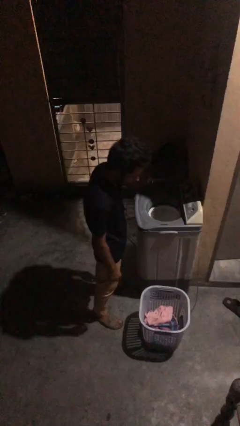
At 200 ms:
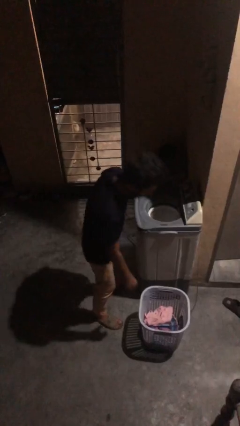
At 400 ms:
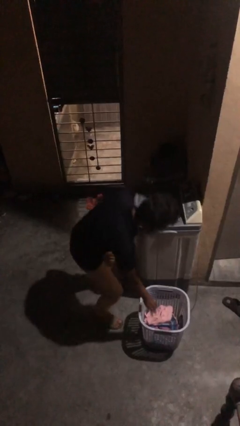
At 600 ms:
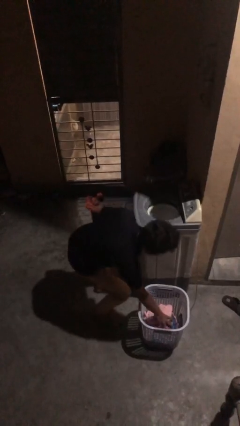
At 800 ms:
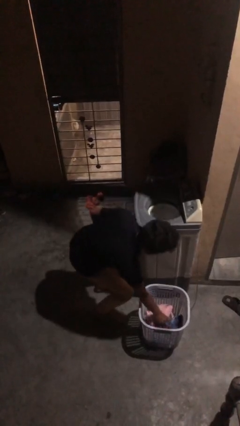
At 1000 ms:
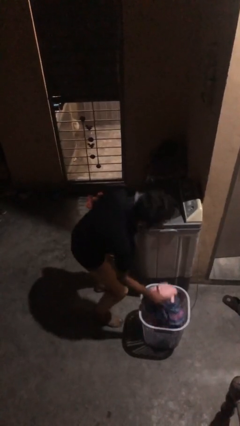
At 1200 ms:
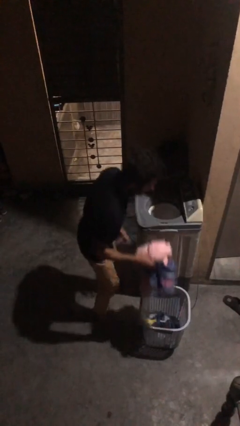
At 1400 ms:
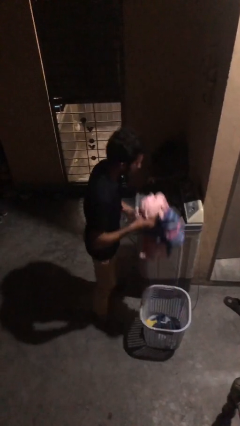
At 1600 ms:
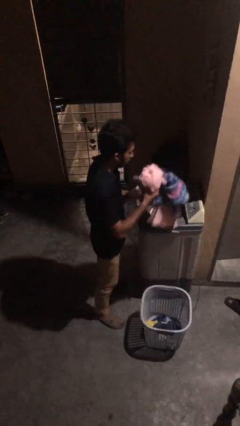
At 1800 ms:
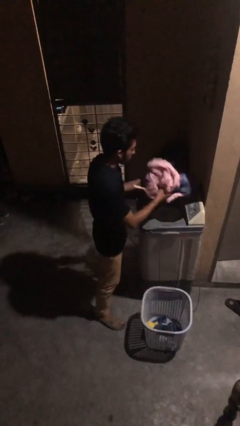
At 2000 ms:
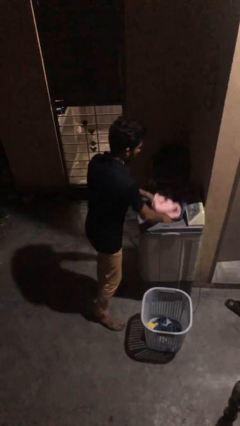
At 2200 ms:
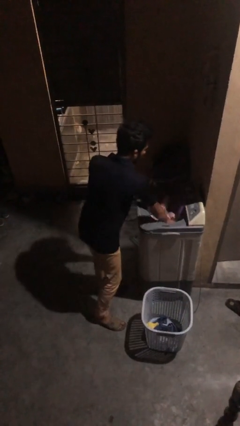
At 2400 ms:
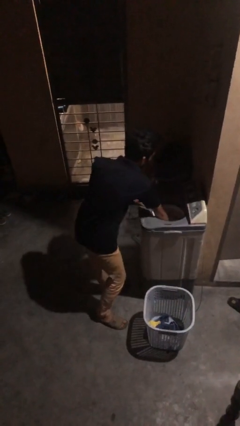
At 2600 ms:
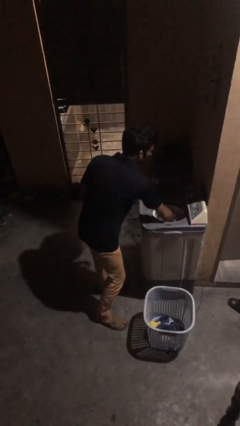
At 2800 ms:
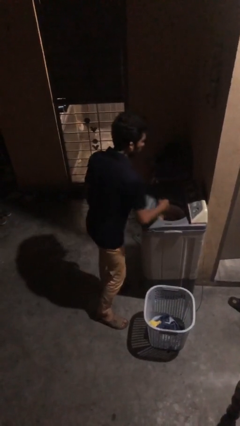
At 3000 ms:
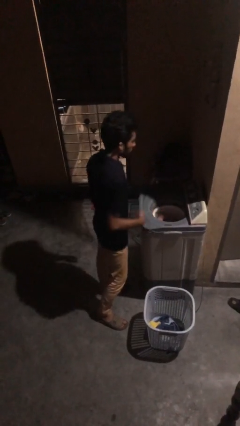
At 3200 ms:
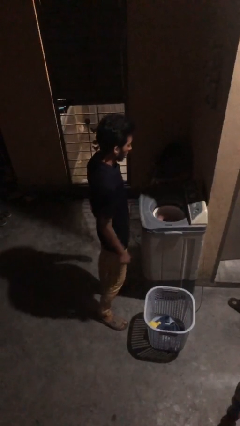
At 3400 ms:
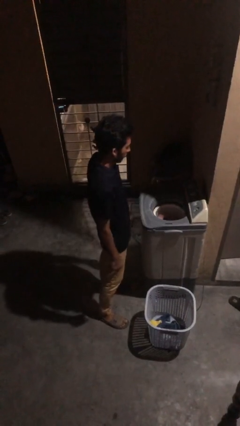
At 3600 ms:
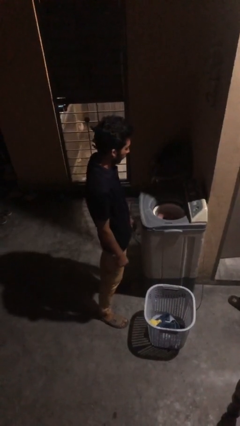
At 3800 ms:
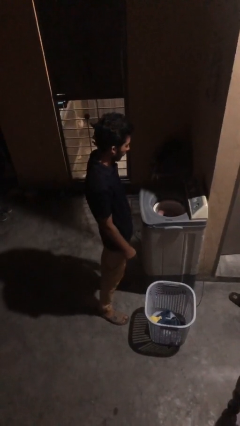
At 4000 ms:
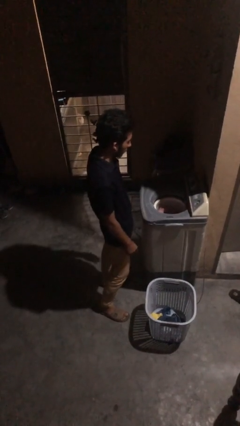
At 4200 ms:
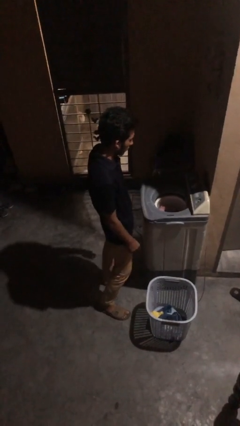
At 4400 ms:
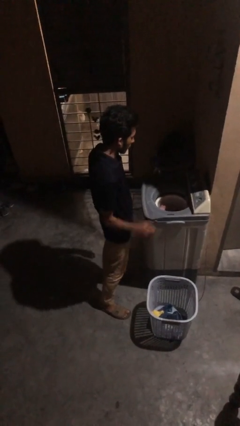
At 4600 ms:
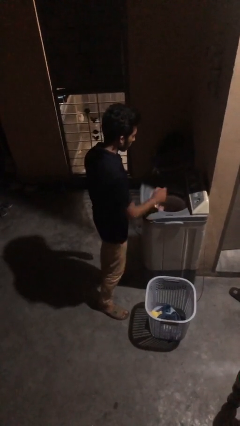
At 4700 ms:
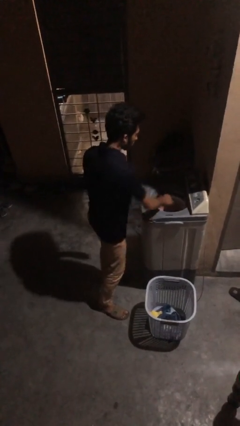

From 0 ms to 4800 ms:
person loads dryer

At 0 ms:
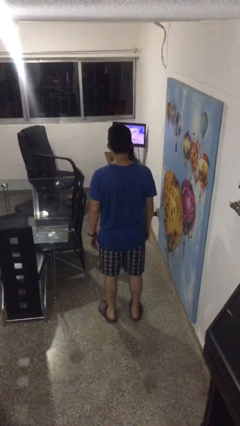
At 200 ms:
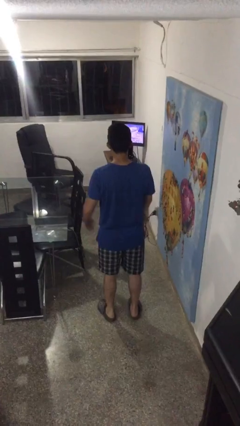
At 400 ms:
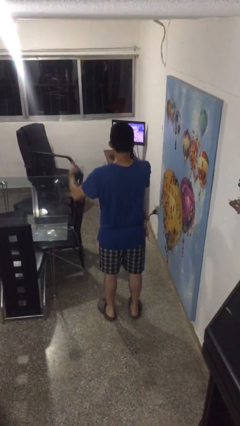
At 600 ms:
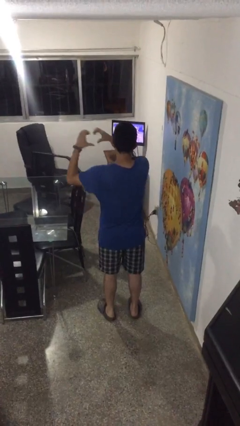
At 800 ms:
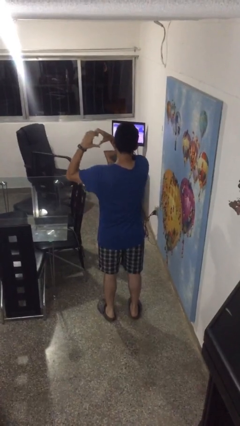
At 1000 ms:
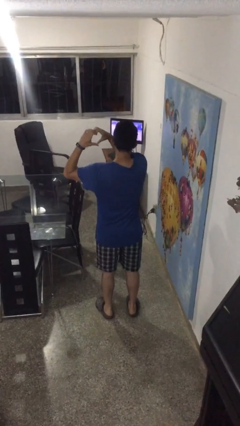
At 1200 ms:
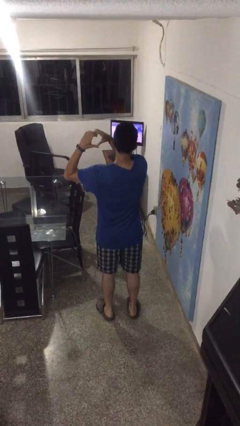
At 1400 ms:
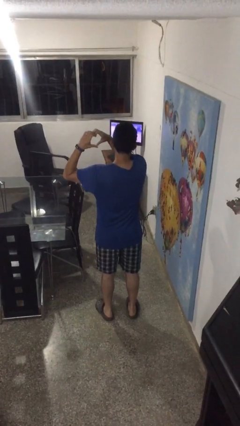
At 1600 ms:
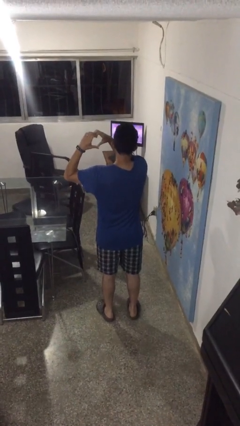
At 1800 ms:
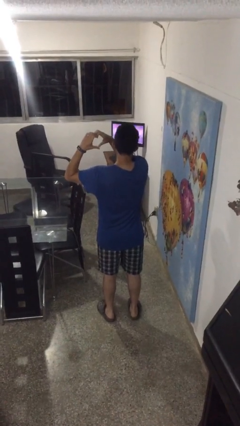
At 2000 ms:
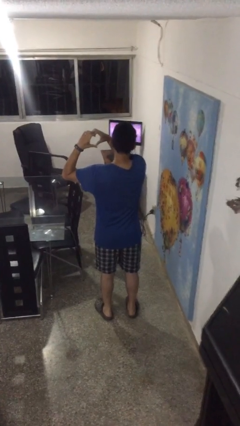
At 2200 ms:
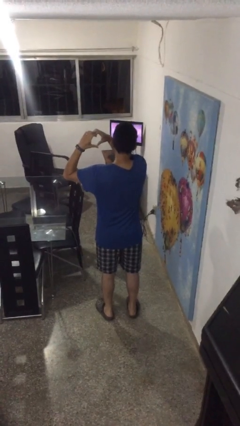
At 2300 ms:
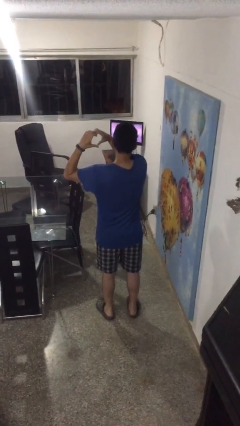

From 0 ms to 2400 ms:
person gestures heart

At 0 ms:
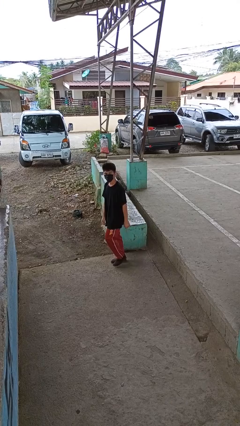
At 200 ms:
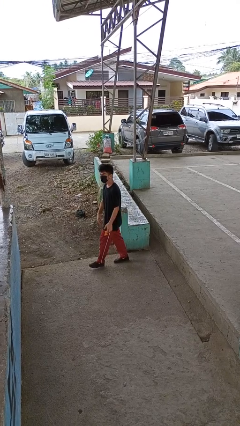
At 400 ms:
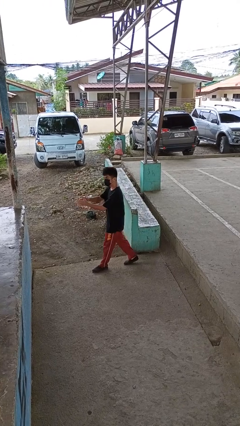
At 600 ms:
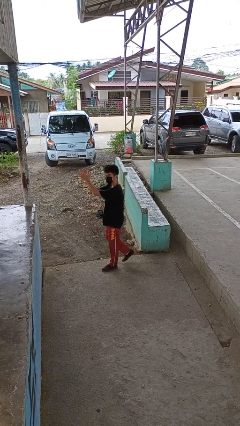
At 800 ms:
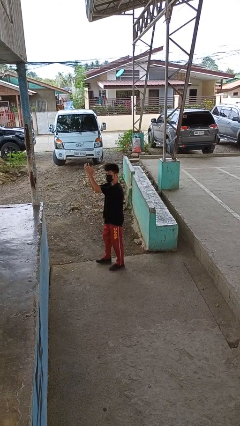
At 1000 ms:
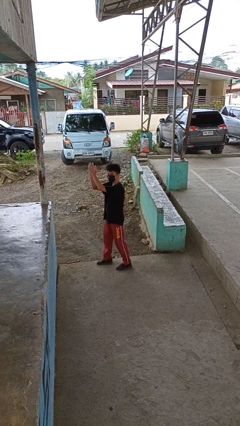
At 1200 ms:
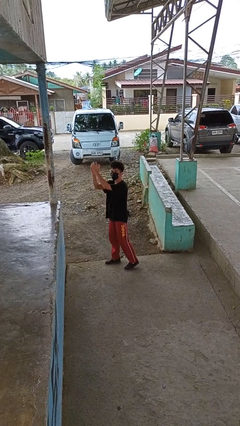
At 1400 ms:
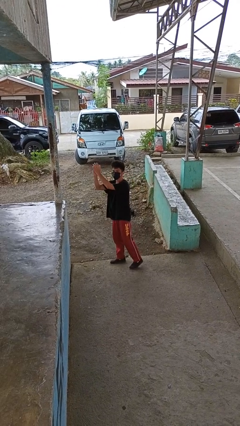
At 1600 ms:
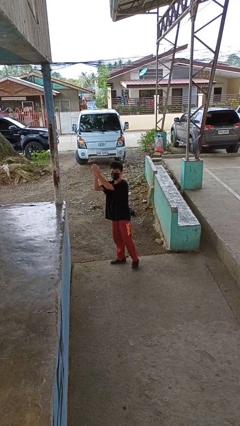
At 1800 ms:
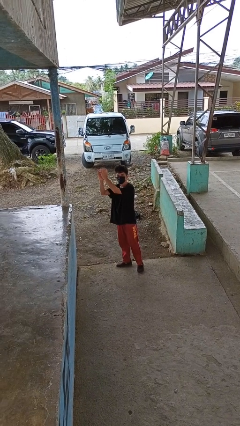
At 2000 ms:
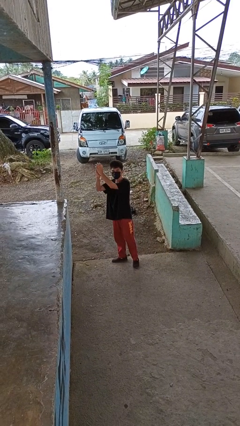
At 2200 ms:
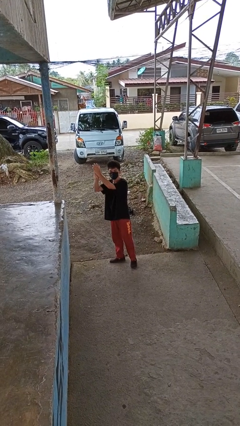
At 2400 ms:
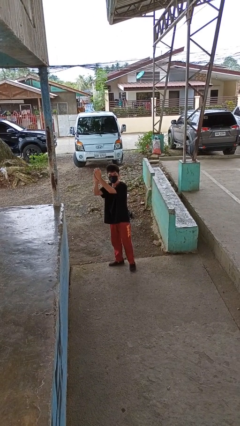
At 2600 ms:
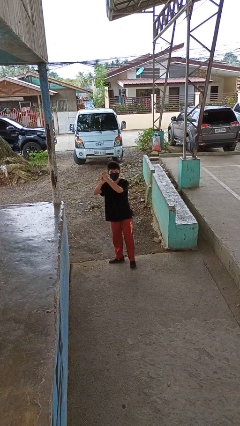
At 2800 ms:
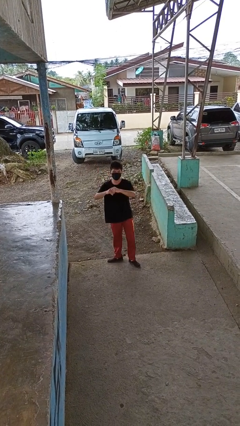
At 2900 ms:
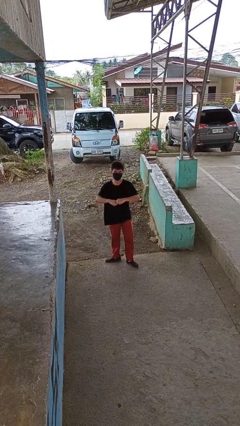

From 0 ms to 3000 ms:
person claps hands

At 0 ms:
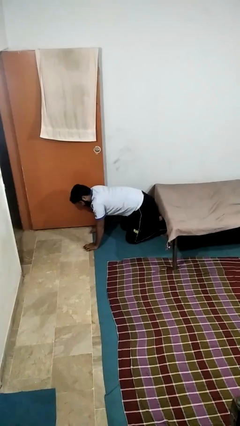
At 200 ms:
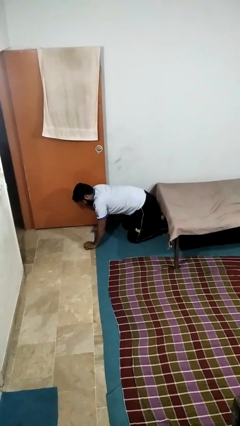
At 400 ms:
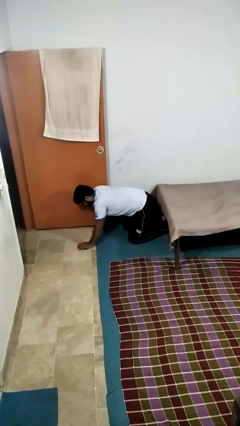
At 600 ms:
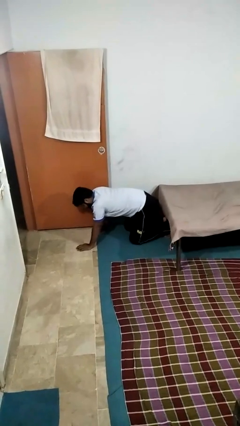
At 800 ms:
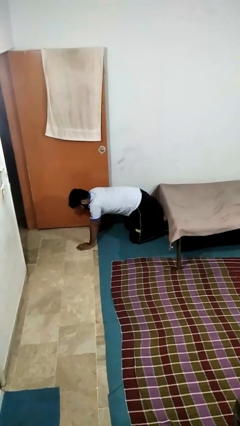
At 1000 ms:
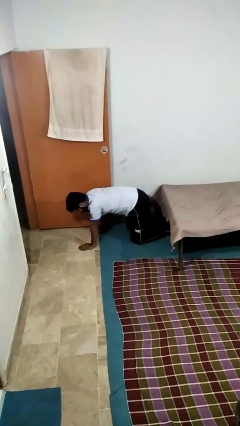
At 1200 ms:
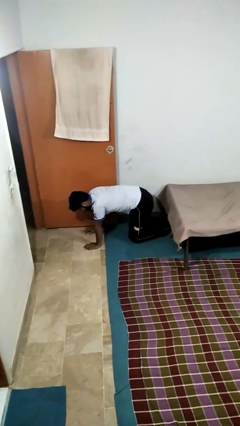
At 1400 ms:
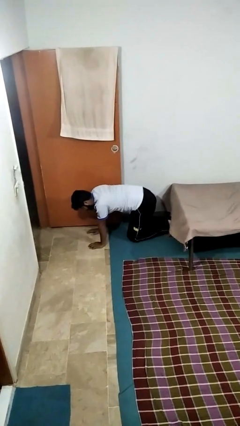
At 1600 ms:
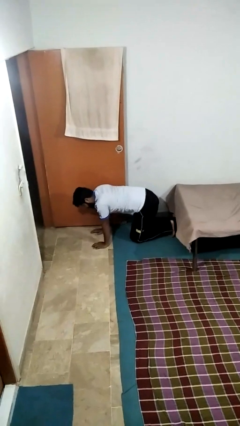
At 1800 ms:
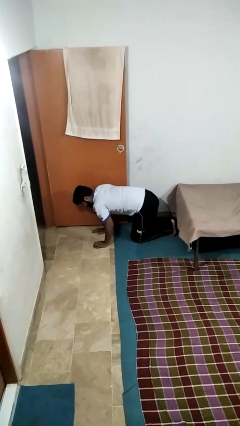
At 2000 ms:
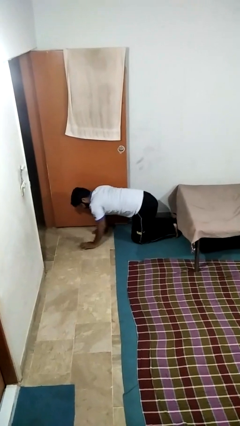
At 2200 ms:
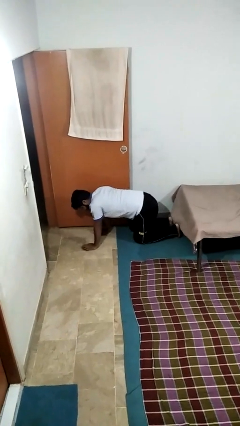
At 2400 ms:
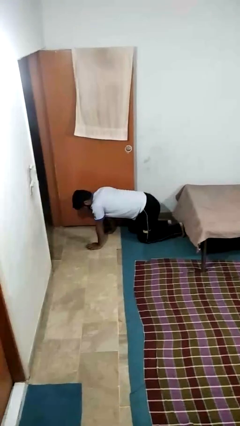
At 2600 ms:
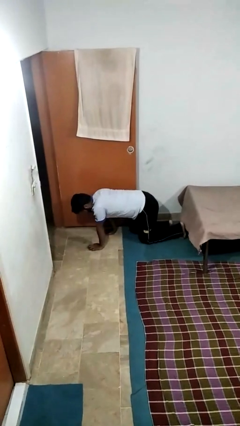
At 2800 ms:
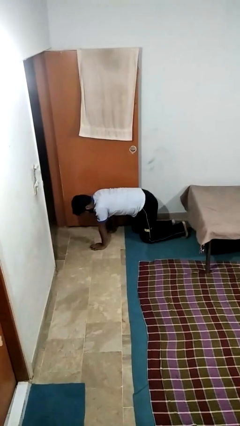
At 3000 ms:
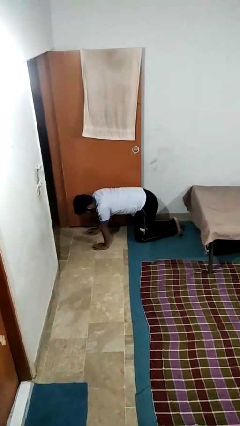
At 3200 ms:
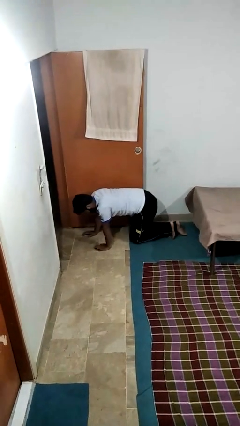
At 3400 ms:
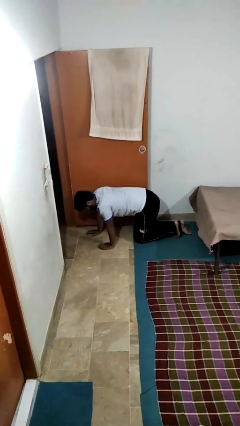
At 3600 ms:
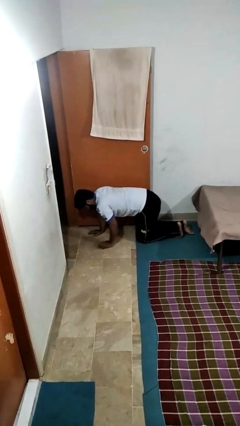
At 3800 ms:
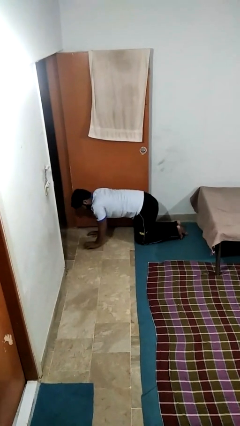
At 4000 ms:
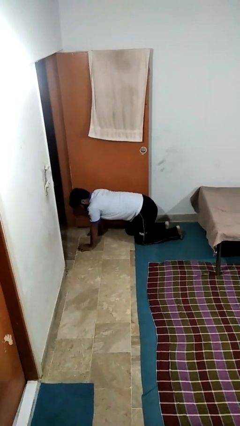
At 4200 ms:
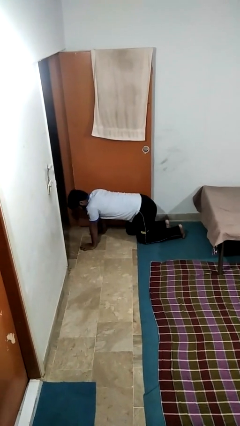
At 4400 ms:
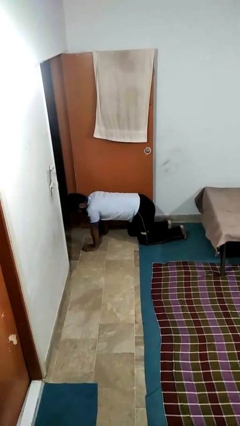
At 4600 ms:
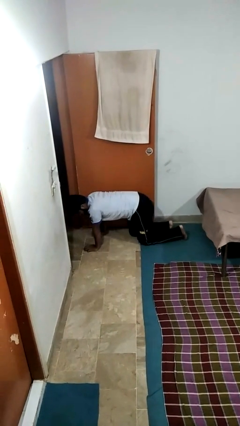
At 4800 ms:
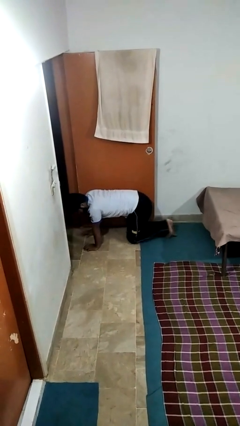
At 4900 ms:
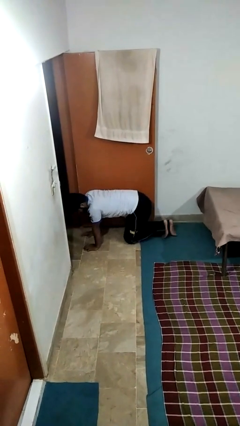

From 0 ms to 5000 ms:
person crawls

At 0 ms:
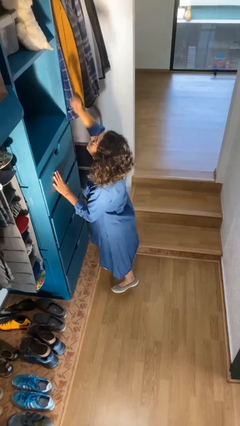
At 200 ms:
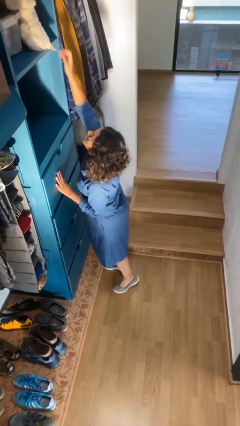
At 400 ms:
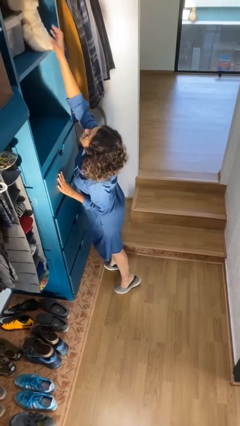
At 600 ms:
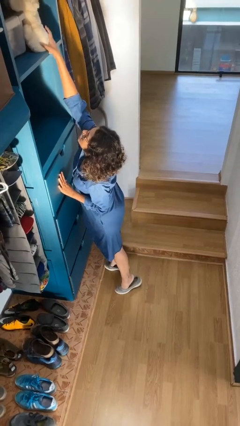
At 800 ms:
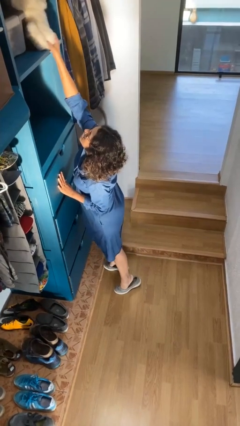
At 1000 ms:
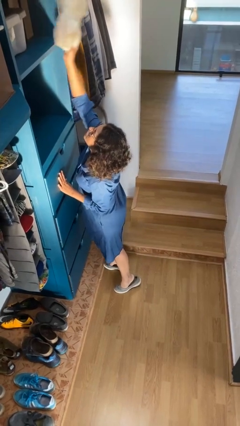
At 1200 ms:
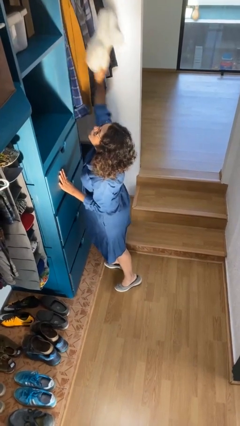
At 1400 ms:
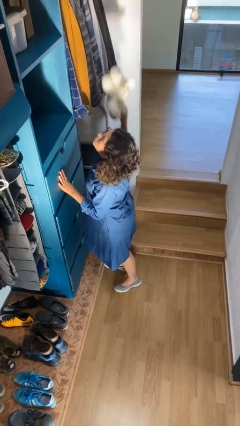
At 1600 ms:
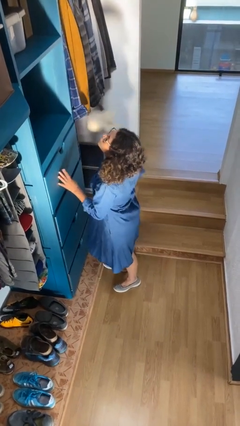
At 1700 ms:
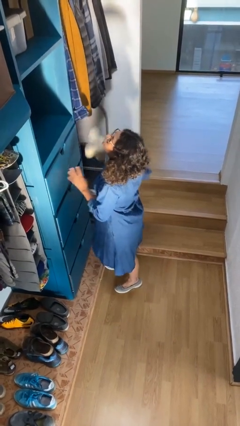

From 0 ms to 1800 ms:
person picks up object from shelf

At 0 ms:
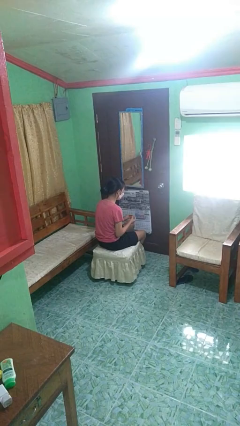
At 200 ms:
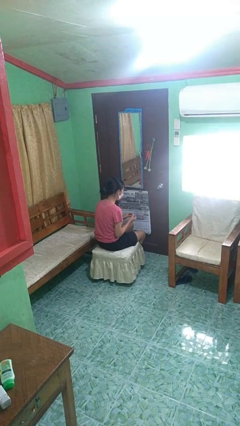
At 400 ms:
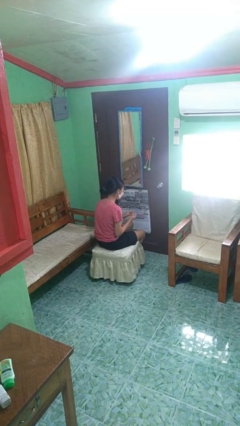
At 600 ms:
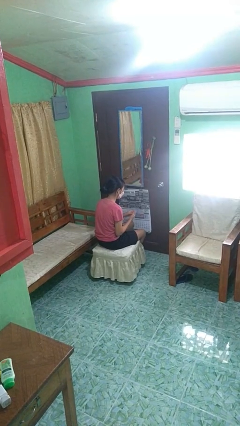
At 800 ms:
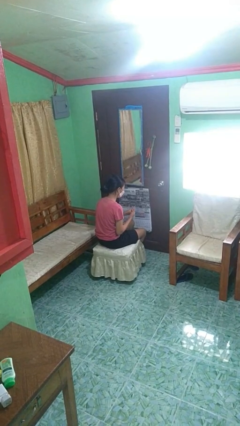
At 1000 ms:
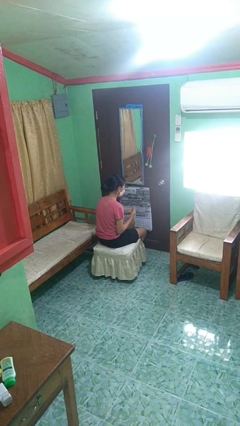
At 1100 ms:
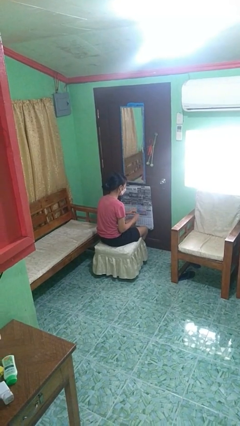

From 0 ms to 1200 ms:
person puts on ring
